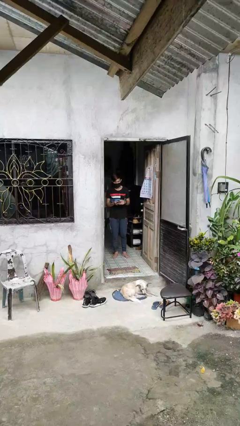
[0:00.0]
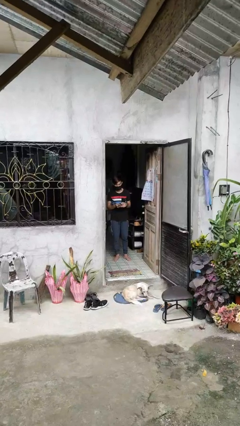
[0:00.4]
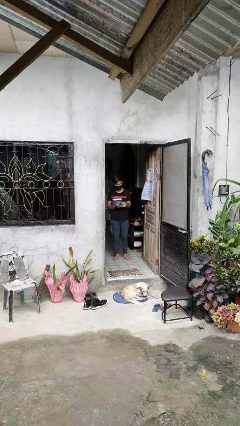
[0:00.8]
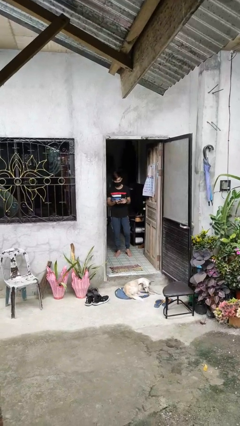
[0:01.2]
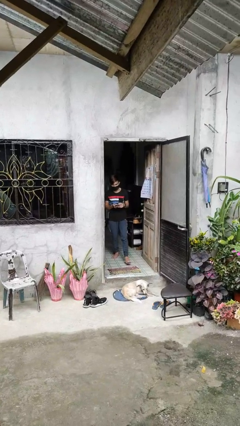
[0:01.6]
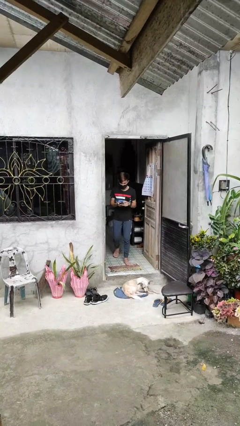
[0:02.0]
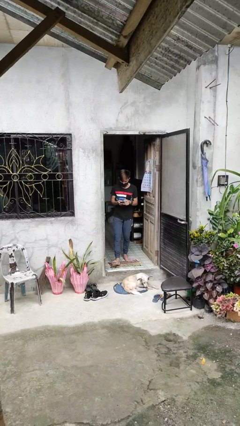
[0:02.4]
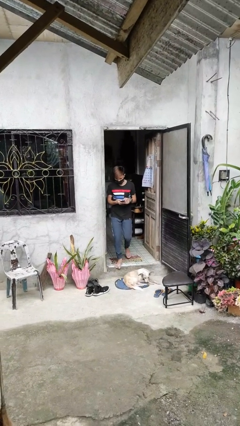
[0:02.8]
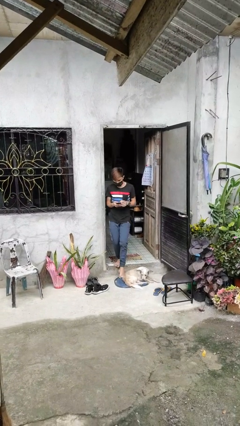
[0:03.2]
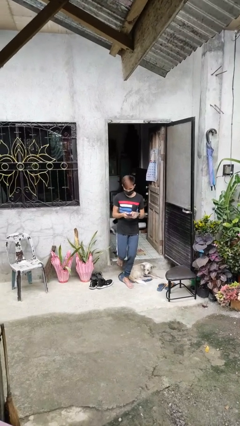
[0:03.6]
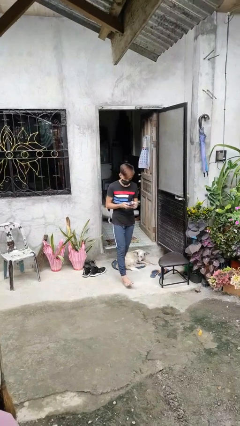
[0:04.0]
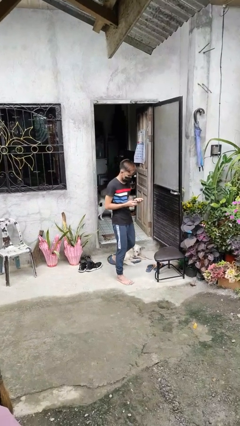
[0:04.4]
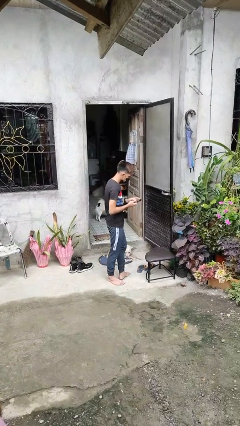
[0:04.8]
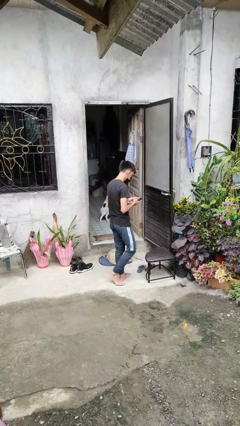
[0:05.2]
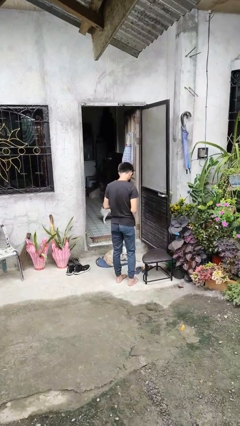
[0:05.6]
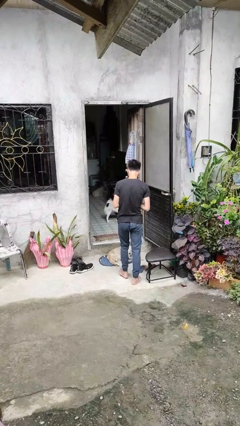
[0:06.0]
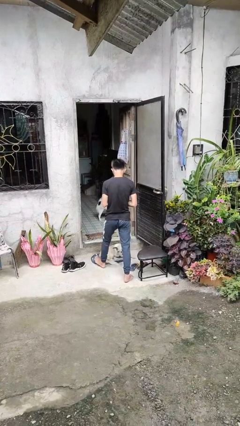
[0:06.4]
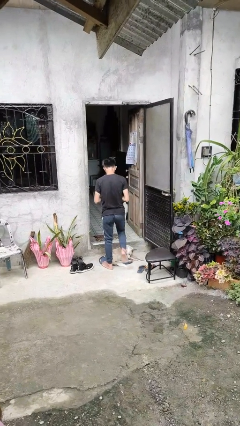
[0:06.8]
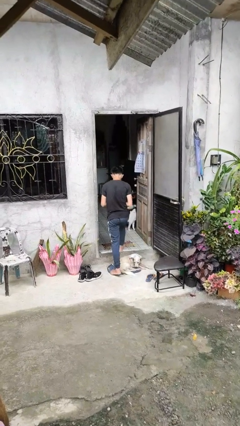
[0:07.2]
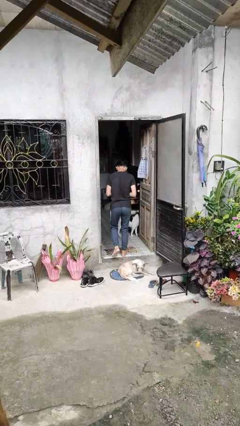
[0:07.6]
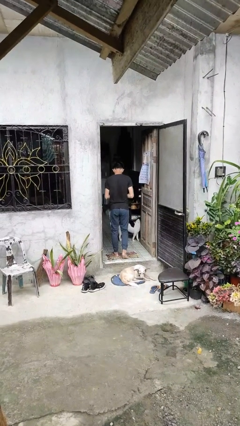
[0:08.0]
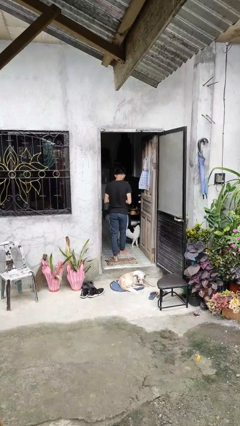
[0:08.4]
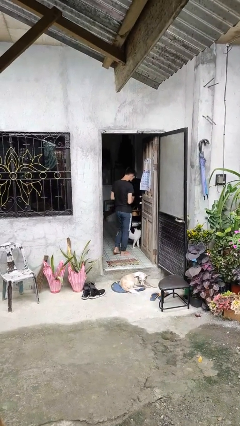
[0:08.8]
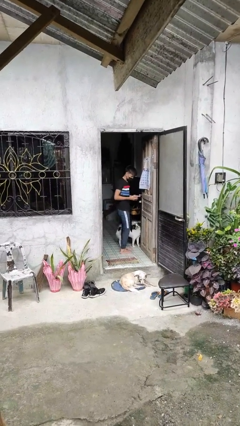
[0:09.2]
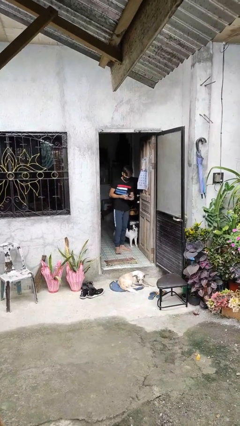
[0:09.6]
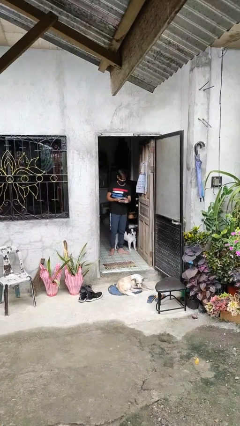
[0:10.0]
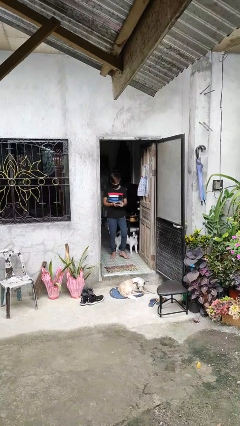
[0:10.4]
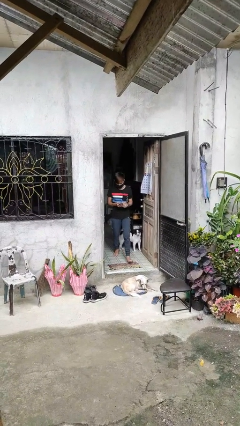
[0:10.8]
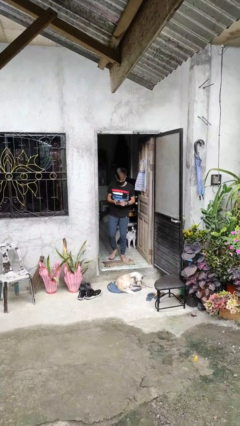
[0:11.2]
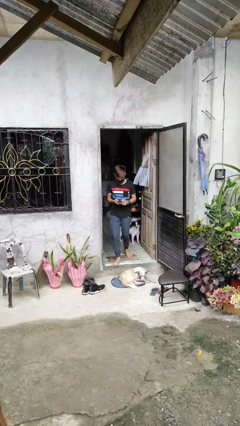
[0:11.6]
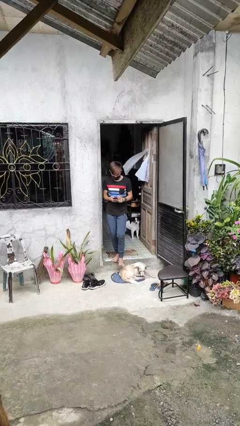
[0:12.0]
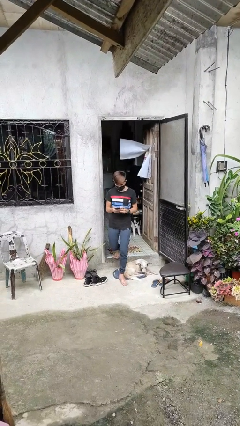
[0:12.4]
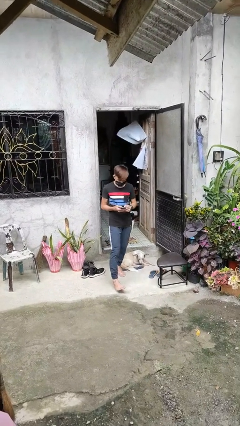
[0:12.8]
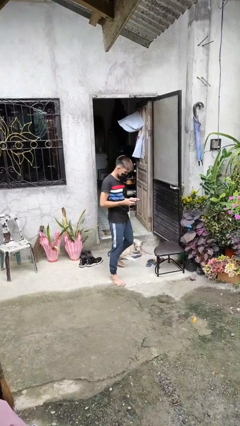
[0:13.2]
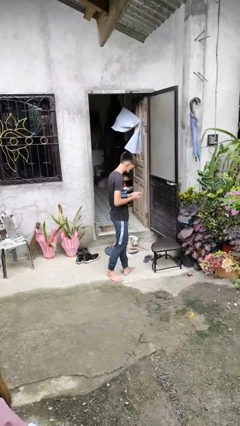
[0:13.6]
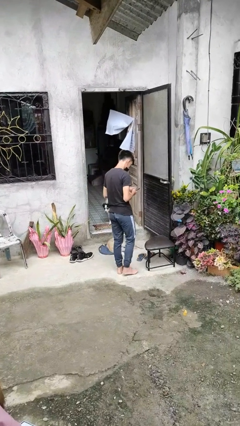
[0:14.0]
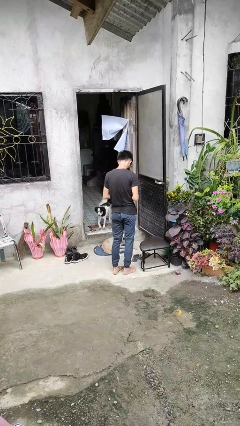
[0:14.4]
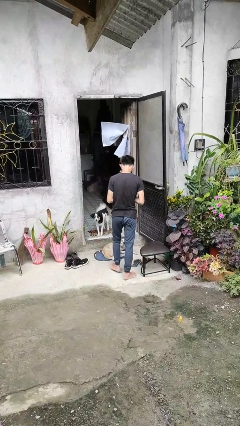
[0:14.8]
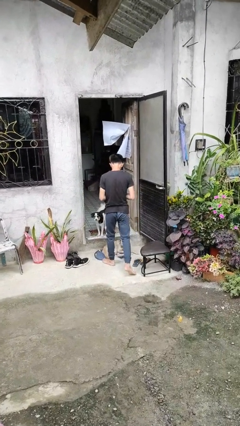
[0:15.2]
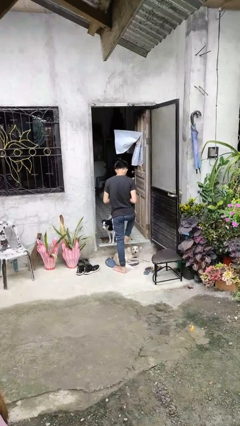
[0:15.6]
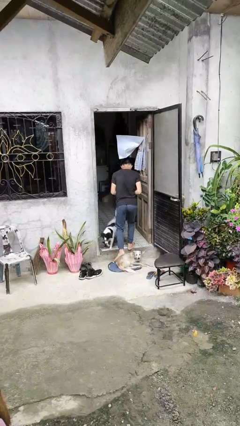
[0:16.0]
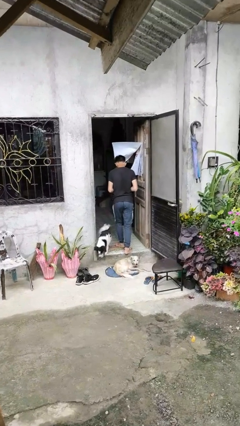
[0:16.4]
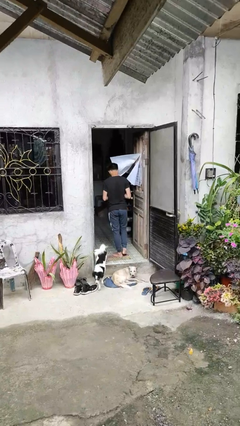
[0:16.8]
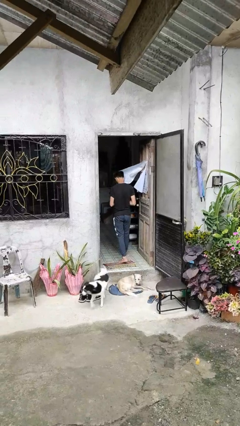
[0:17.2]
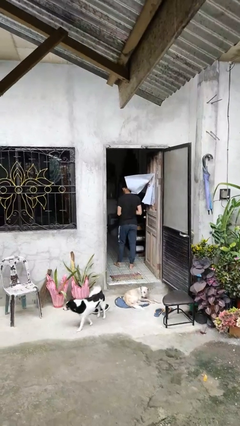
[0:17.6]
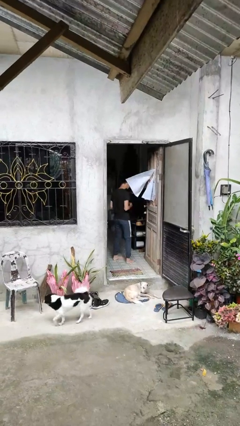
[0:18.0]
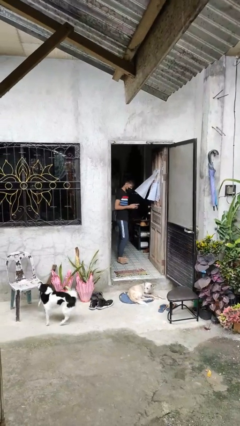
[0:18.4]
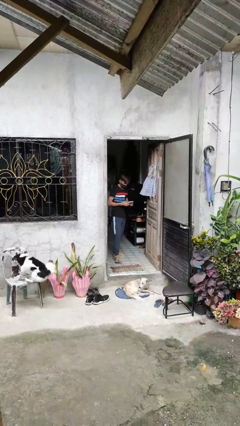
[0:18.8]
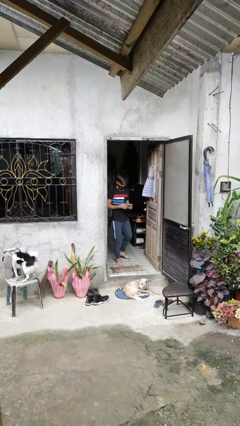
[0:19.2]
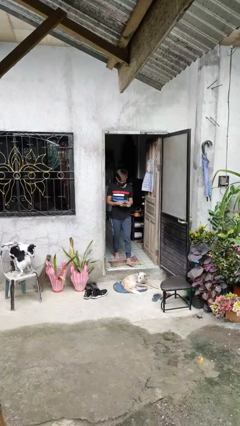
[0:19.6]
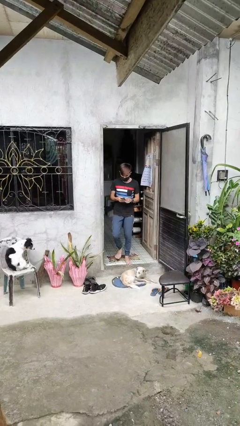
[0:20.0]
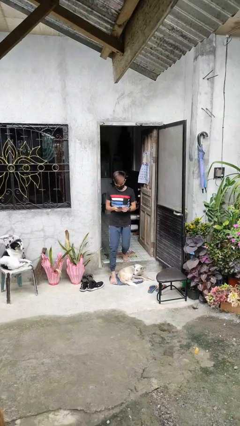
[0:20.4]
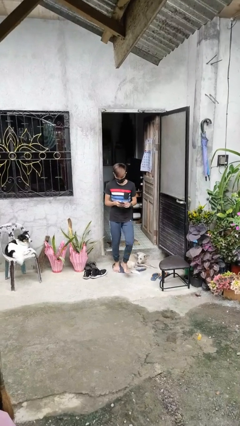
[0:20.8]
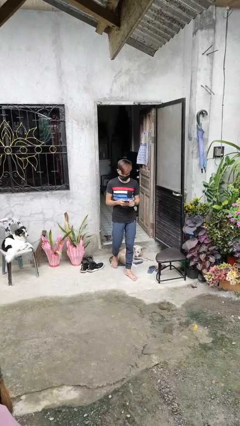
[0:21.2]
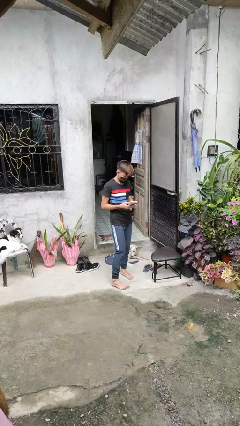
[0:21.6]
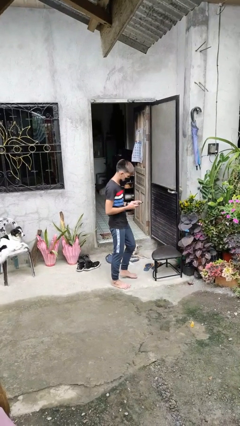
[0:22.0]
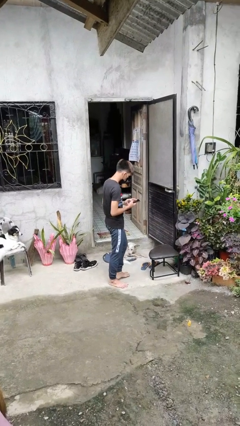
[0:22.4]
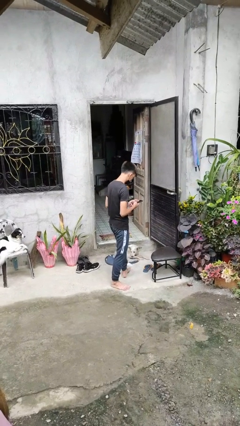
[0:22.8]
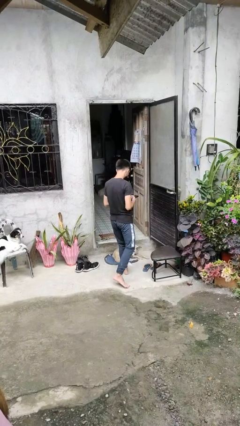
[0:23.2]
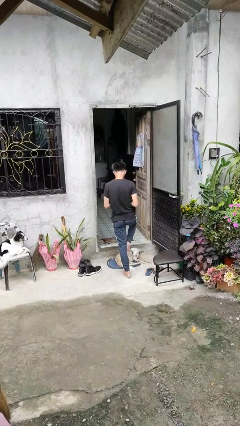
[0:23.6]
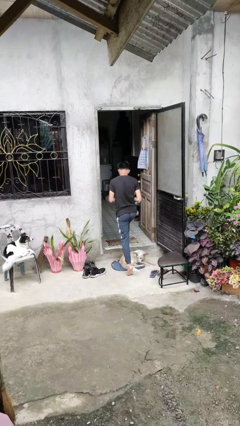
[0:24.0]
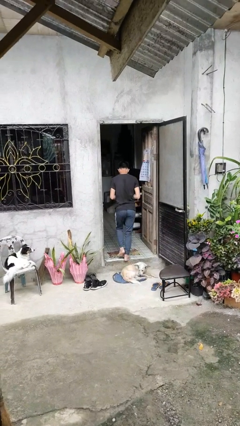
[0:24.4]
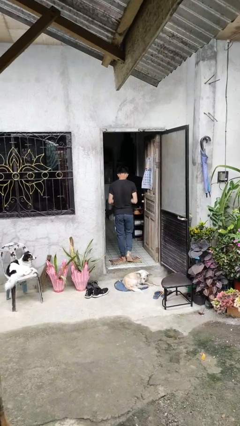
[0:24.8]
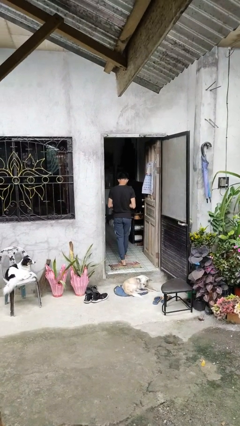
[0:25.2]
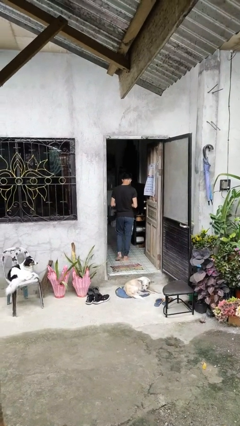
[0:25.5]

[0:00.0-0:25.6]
person texts on phone

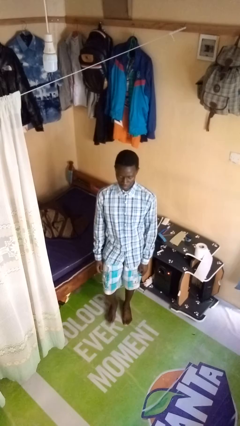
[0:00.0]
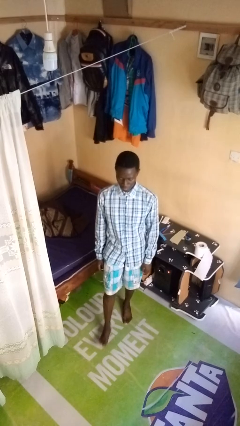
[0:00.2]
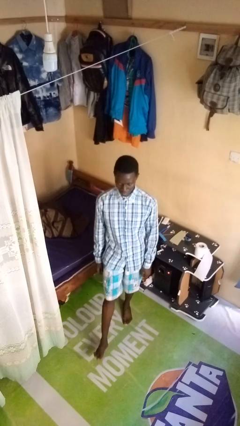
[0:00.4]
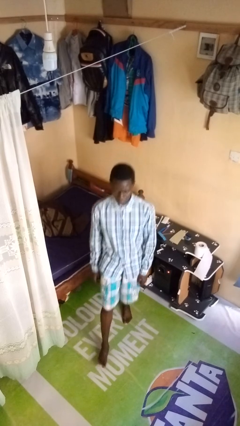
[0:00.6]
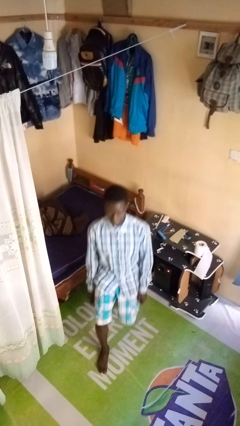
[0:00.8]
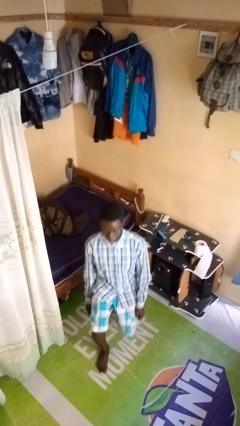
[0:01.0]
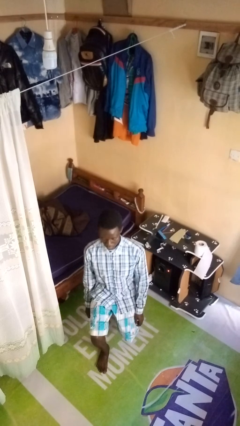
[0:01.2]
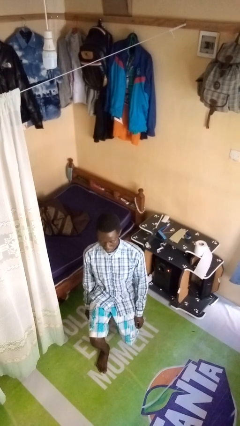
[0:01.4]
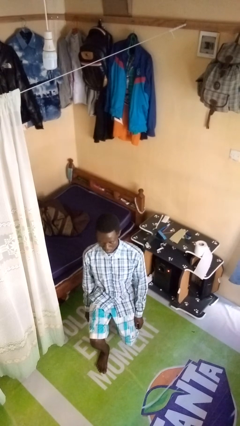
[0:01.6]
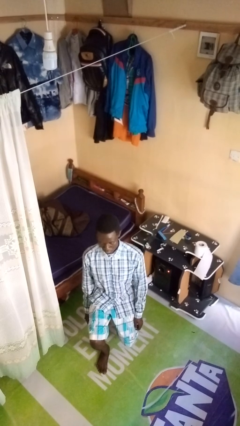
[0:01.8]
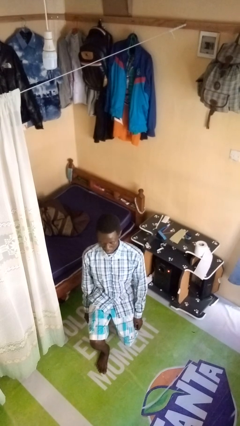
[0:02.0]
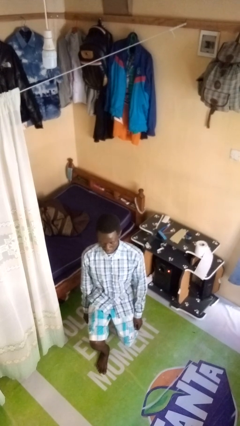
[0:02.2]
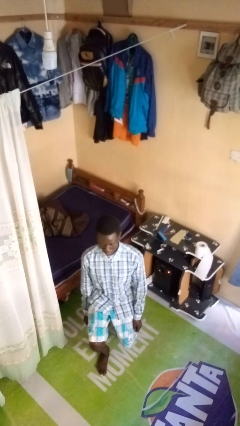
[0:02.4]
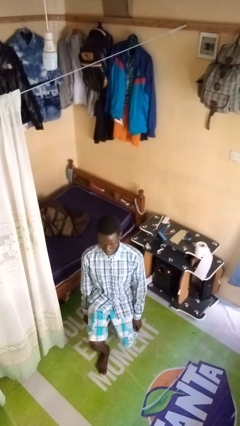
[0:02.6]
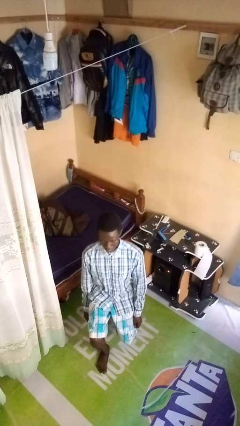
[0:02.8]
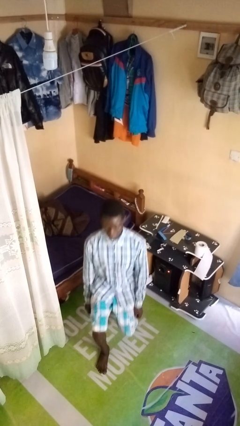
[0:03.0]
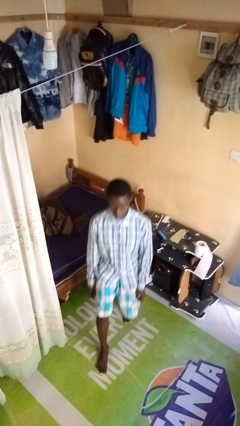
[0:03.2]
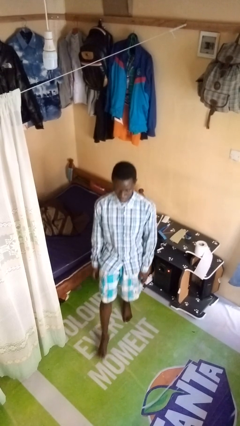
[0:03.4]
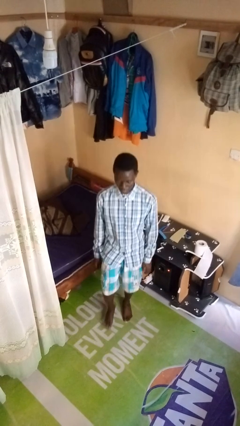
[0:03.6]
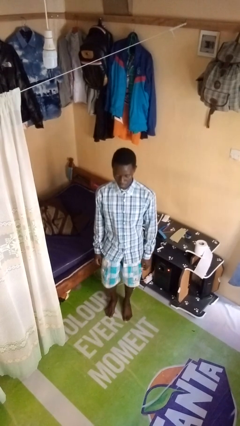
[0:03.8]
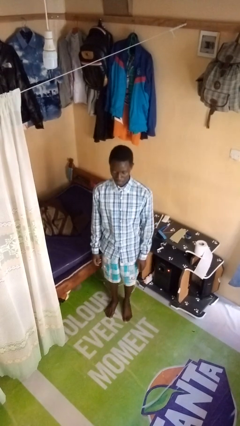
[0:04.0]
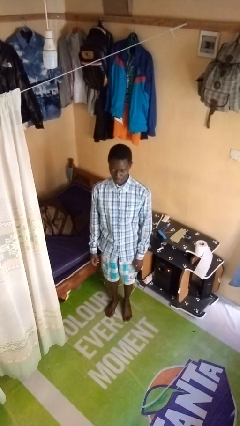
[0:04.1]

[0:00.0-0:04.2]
person exercises with lunges

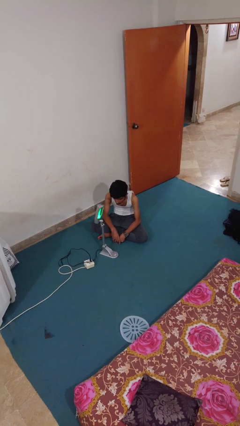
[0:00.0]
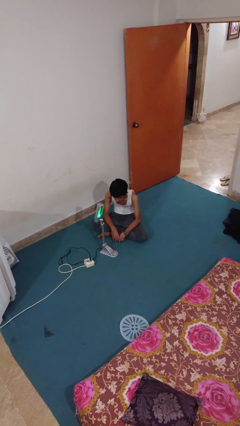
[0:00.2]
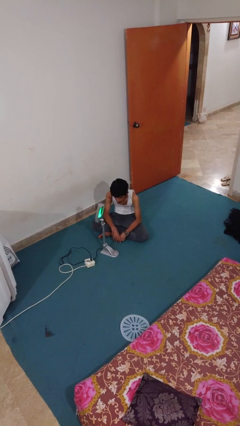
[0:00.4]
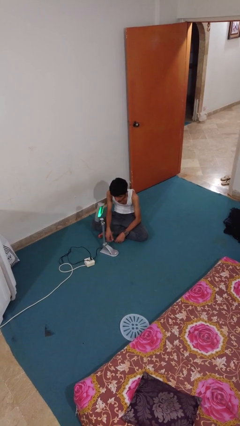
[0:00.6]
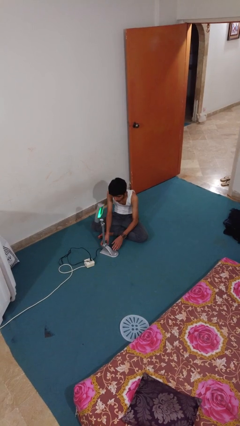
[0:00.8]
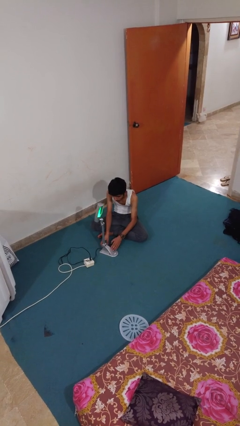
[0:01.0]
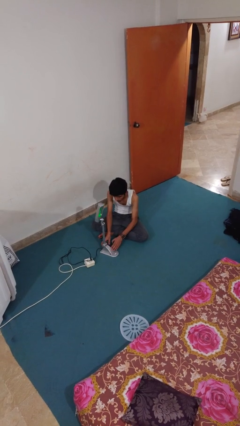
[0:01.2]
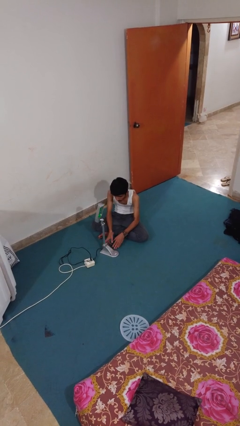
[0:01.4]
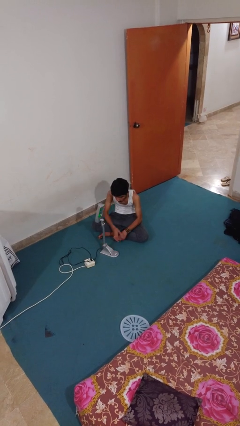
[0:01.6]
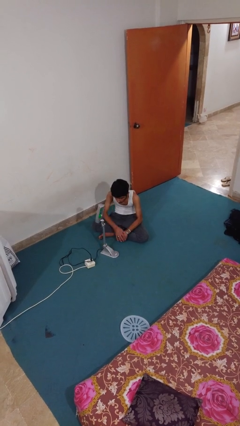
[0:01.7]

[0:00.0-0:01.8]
person turns off lamp
